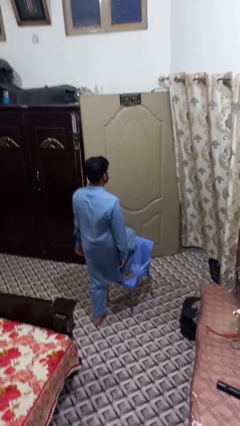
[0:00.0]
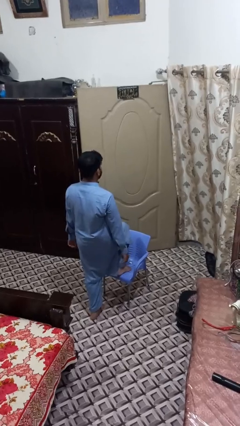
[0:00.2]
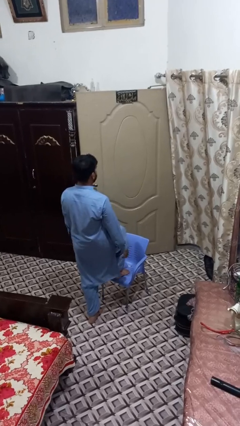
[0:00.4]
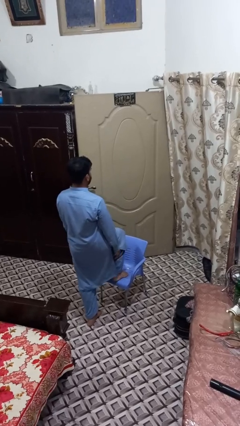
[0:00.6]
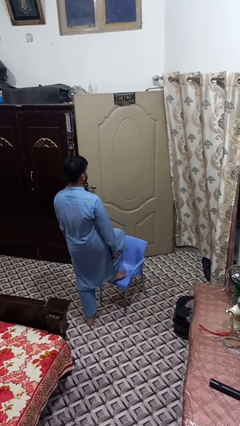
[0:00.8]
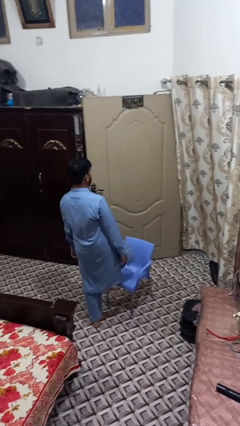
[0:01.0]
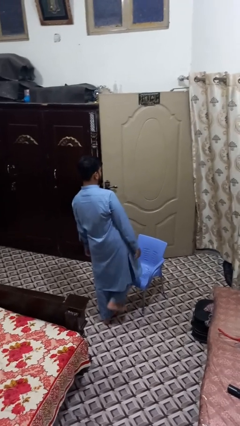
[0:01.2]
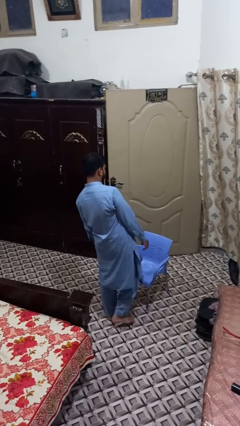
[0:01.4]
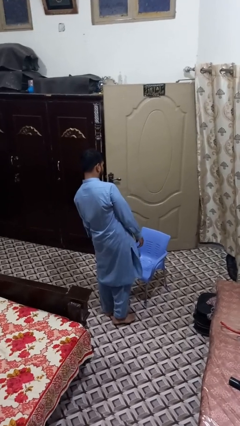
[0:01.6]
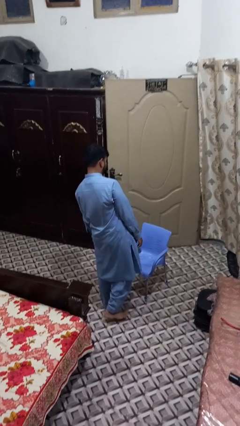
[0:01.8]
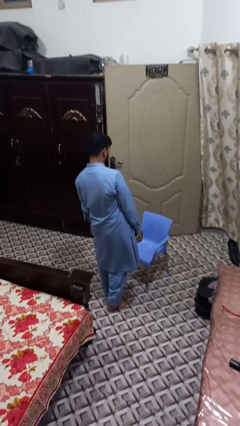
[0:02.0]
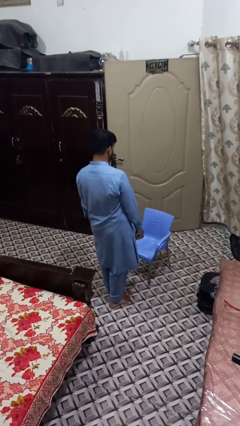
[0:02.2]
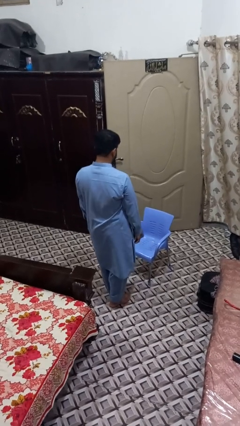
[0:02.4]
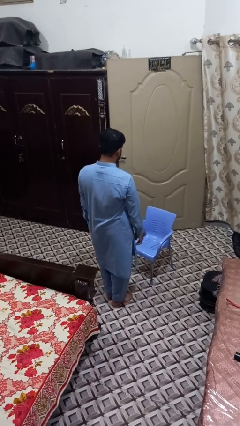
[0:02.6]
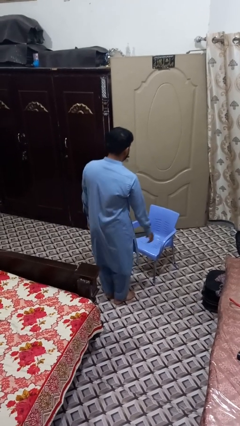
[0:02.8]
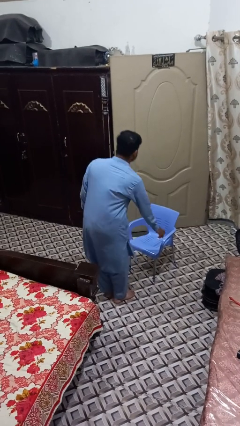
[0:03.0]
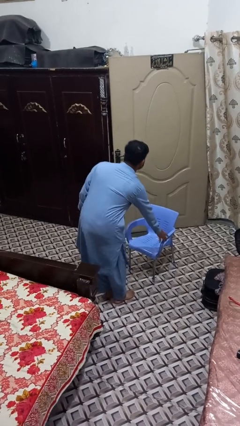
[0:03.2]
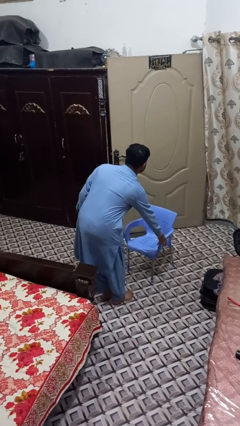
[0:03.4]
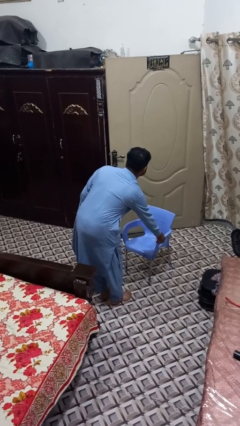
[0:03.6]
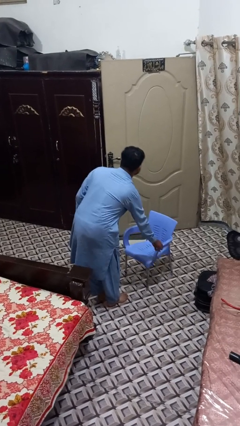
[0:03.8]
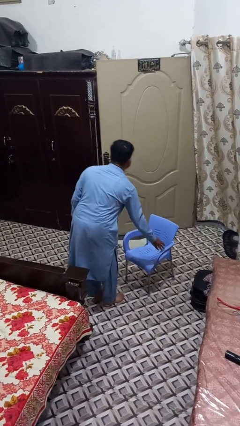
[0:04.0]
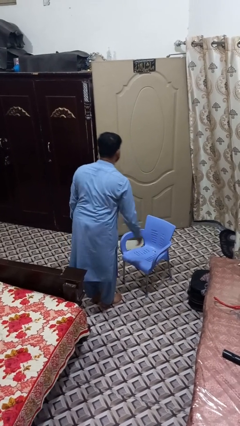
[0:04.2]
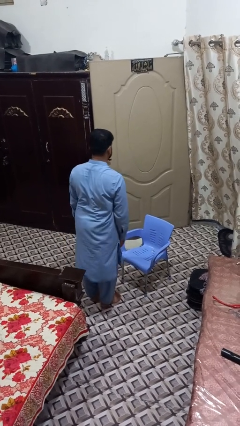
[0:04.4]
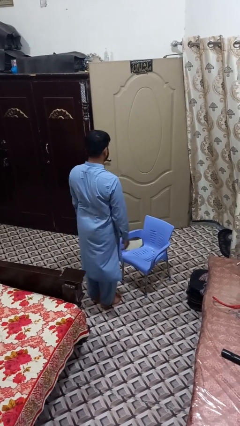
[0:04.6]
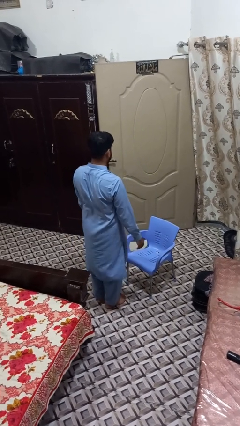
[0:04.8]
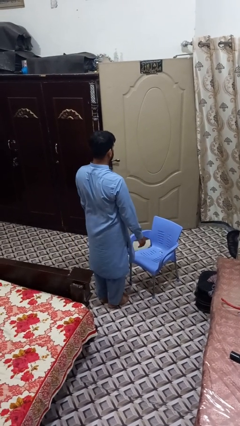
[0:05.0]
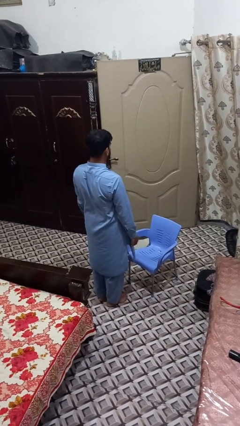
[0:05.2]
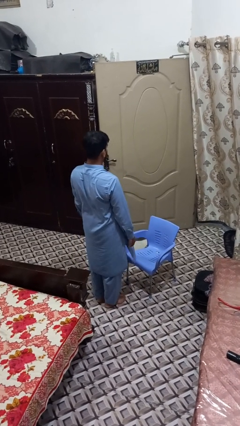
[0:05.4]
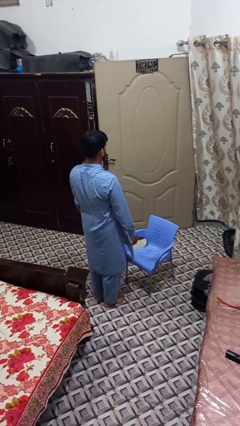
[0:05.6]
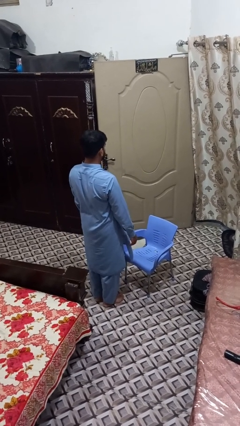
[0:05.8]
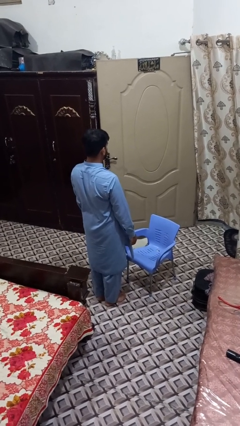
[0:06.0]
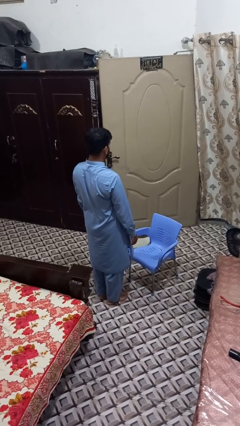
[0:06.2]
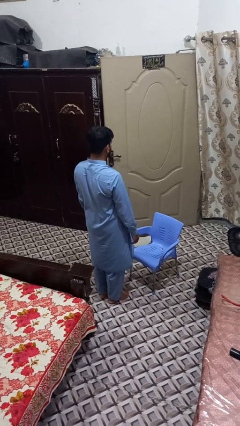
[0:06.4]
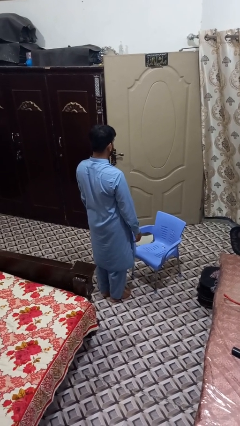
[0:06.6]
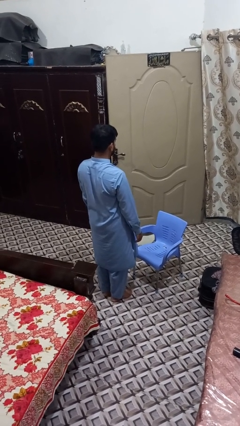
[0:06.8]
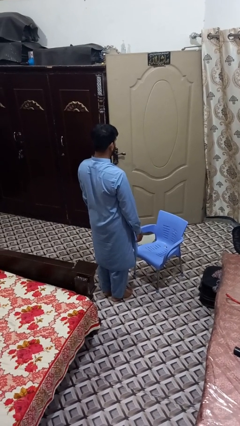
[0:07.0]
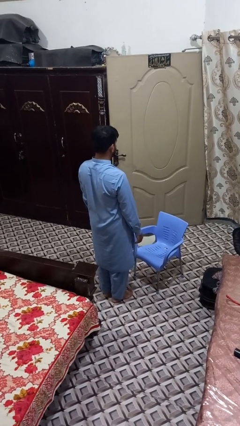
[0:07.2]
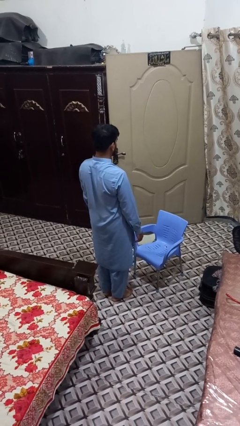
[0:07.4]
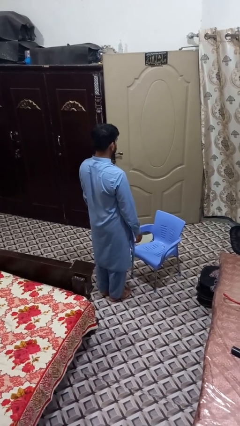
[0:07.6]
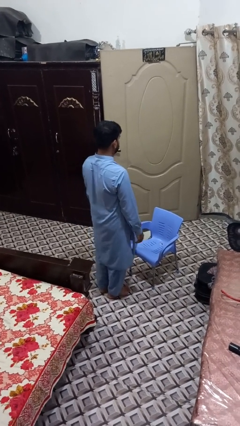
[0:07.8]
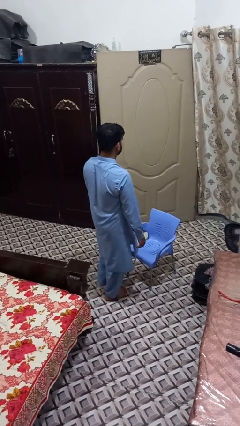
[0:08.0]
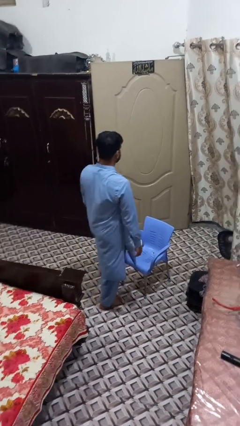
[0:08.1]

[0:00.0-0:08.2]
person climbs off chair

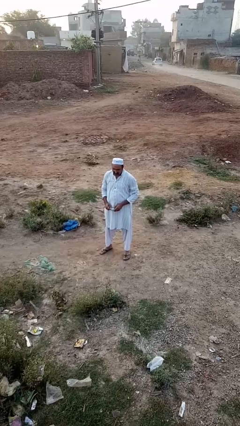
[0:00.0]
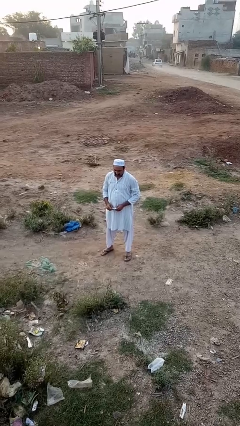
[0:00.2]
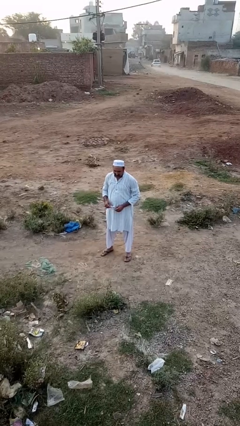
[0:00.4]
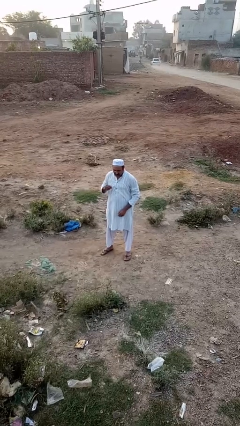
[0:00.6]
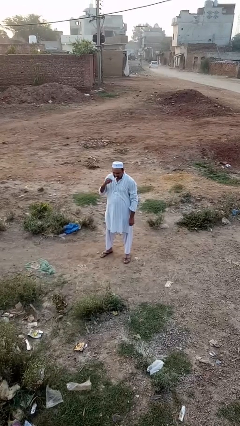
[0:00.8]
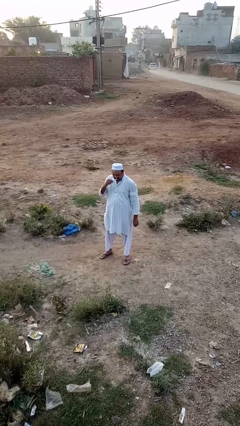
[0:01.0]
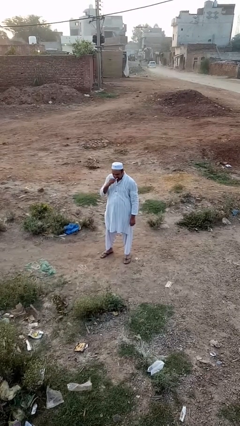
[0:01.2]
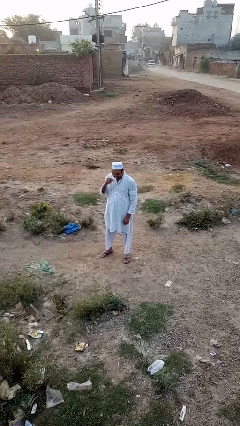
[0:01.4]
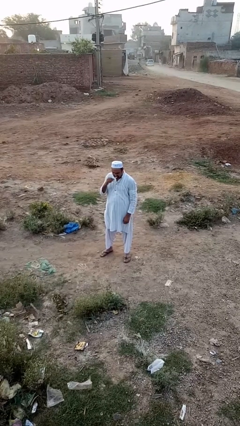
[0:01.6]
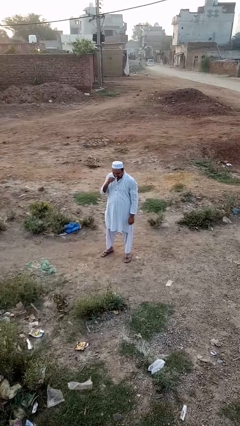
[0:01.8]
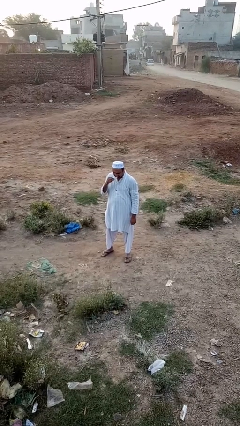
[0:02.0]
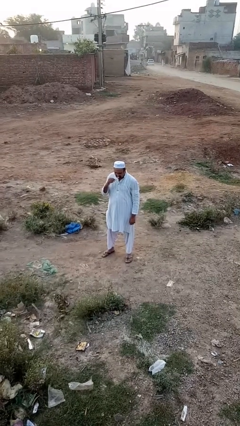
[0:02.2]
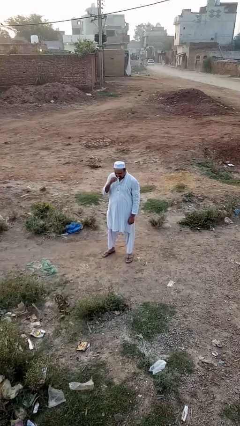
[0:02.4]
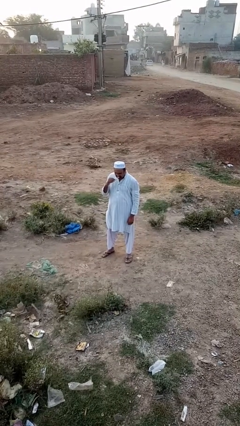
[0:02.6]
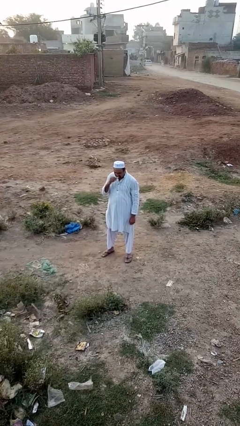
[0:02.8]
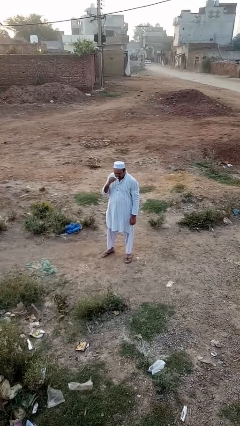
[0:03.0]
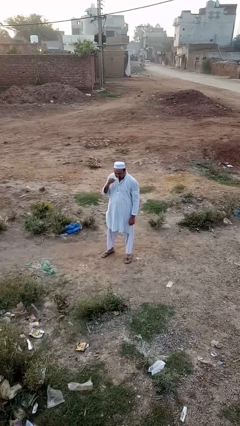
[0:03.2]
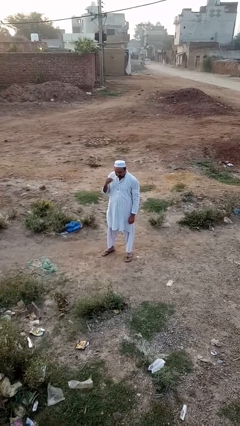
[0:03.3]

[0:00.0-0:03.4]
person brushes teeth

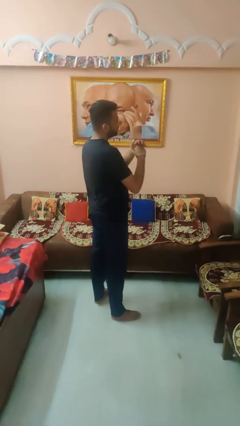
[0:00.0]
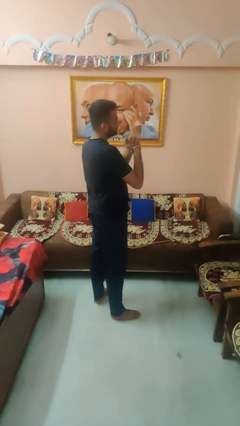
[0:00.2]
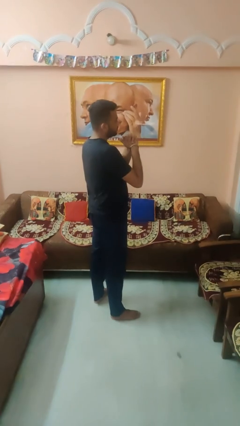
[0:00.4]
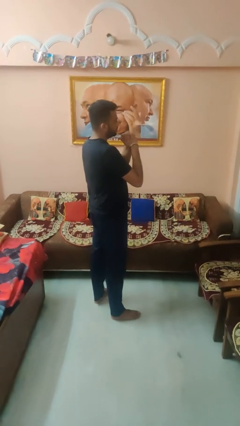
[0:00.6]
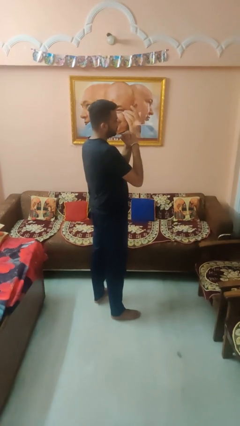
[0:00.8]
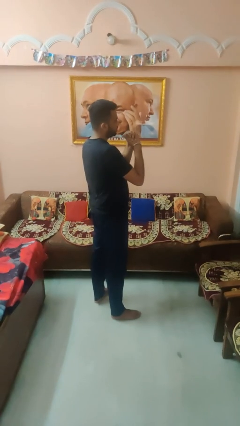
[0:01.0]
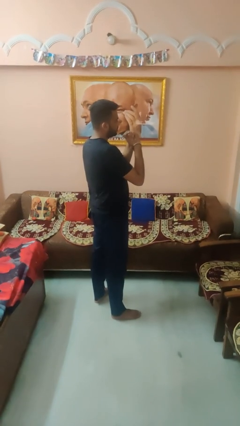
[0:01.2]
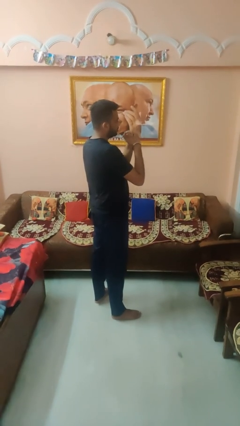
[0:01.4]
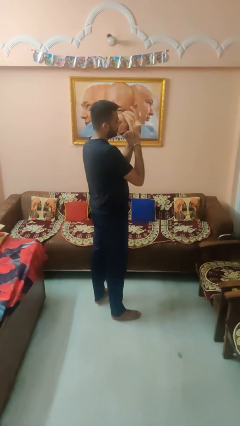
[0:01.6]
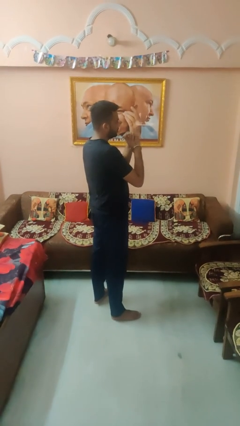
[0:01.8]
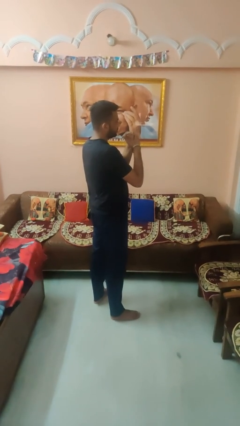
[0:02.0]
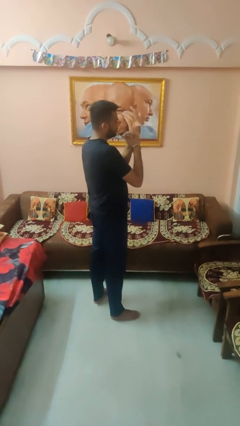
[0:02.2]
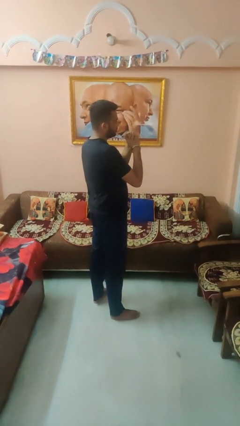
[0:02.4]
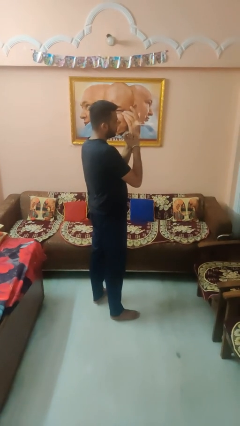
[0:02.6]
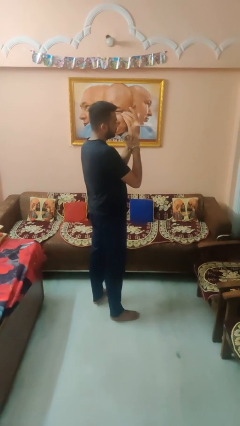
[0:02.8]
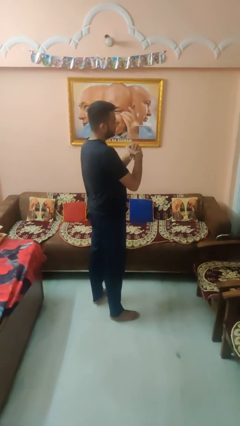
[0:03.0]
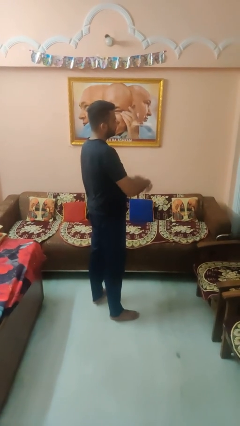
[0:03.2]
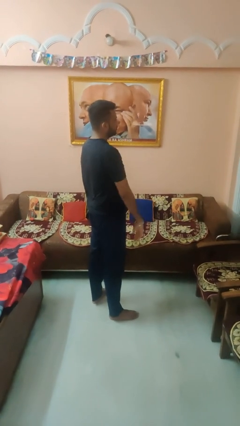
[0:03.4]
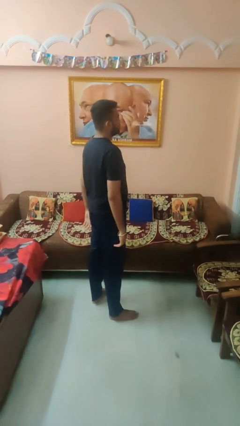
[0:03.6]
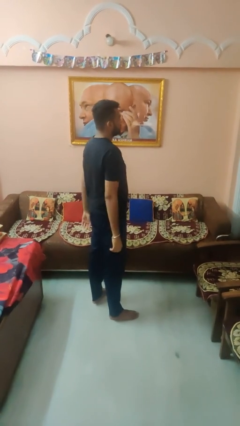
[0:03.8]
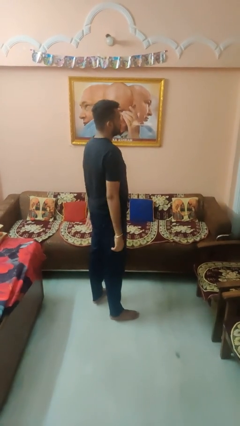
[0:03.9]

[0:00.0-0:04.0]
person cracks knuckles

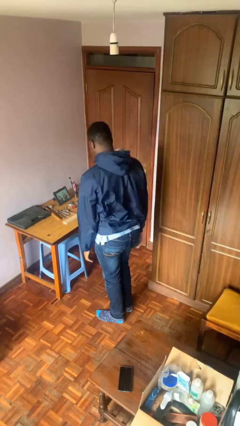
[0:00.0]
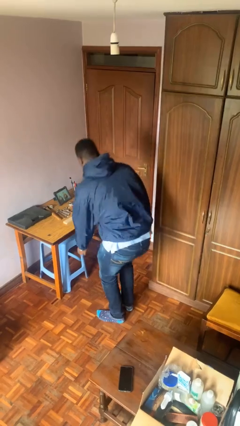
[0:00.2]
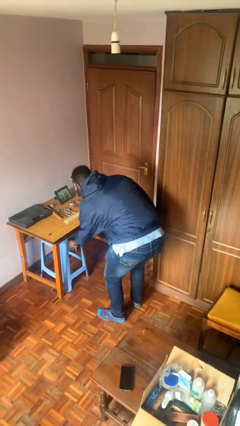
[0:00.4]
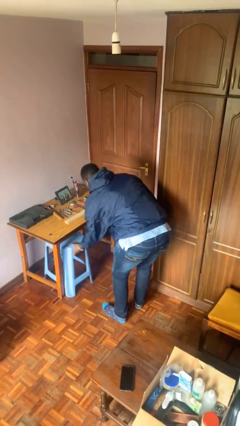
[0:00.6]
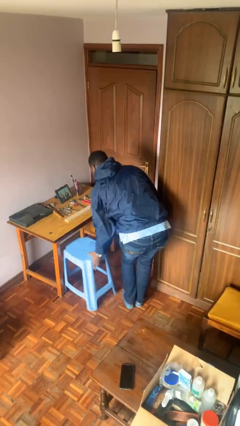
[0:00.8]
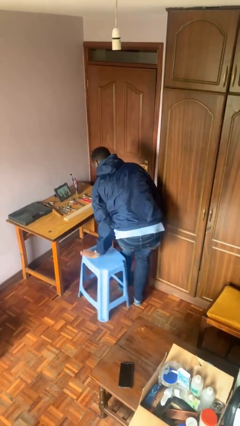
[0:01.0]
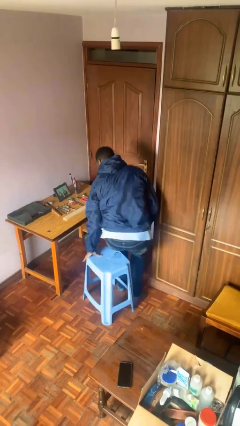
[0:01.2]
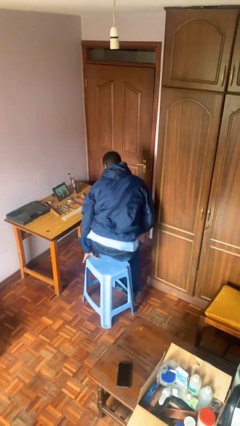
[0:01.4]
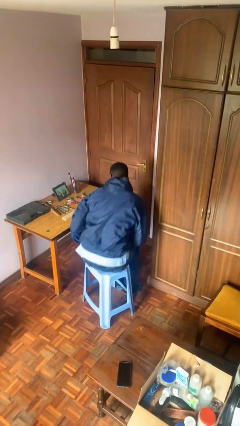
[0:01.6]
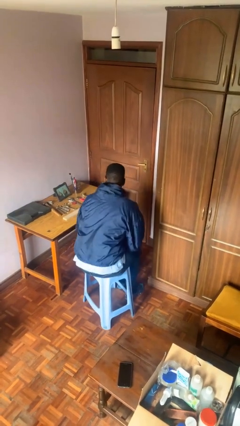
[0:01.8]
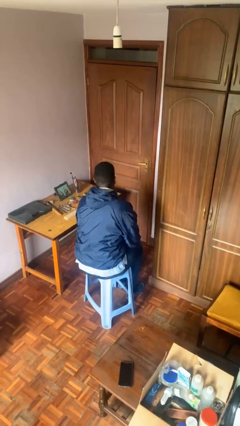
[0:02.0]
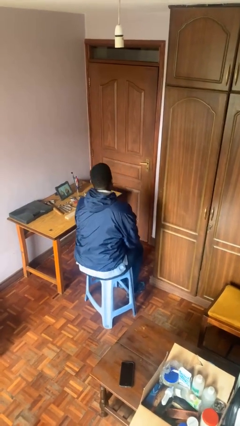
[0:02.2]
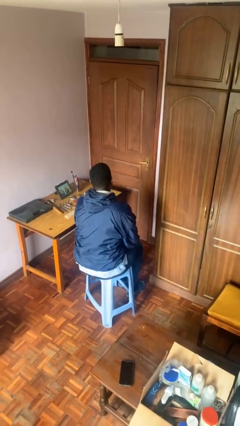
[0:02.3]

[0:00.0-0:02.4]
person sits down
